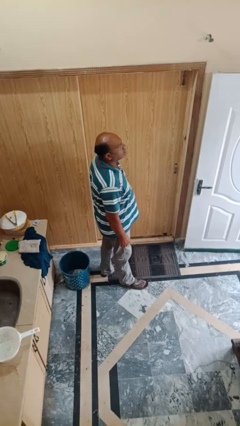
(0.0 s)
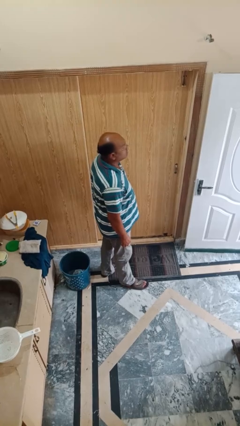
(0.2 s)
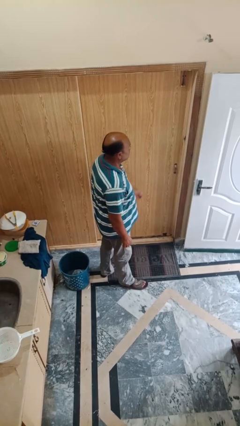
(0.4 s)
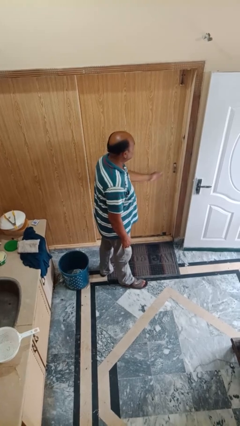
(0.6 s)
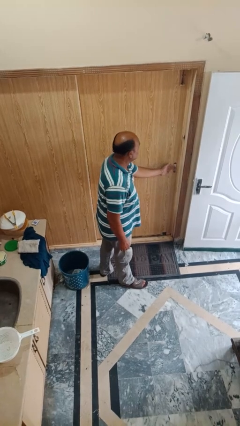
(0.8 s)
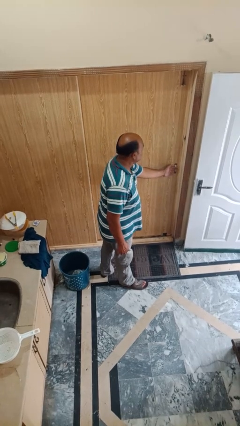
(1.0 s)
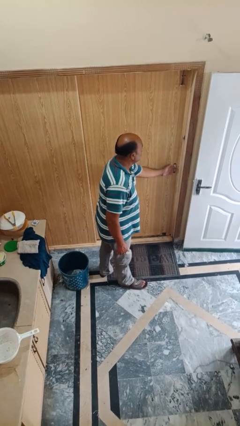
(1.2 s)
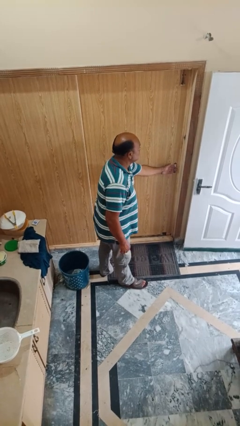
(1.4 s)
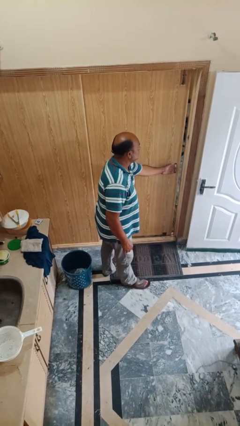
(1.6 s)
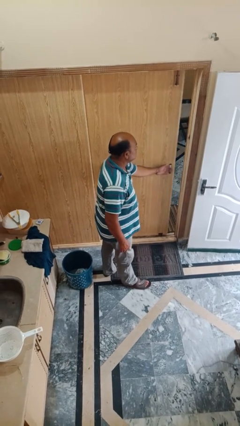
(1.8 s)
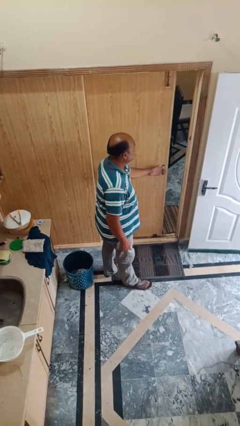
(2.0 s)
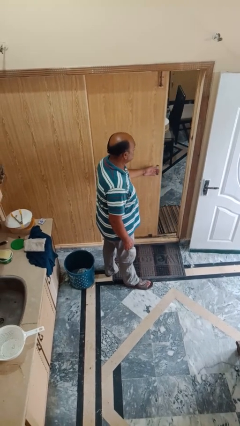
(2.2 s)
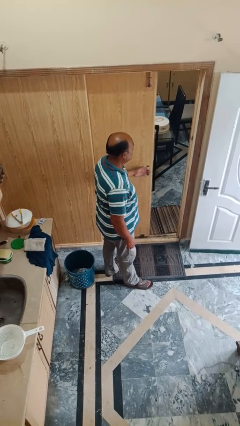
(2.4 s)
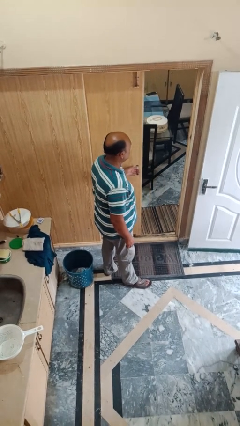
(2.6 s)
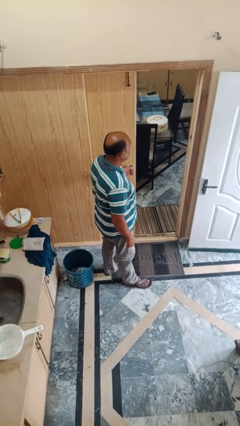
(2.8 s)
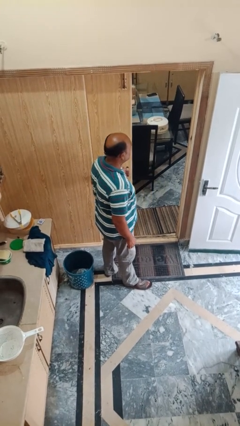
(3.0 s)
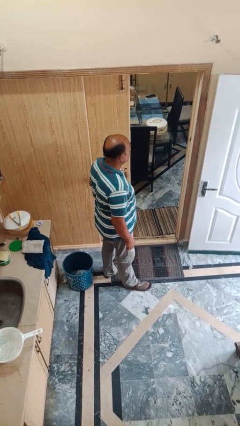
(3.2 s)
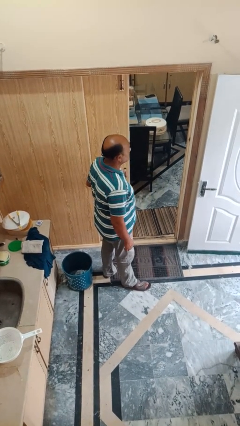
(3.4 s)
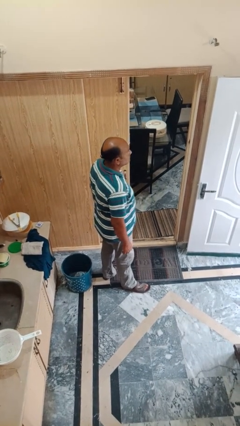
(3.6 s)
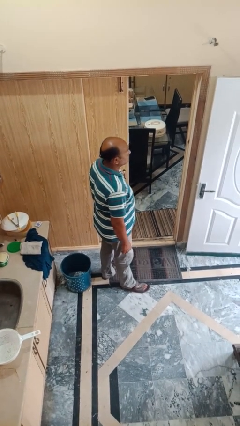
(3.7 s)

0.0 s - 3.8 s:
person opens sliding door

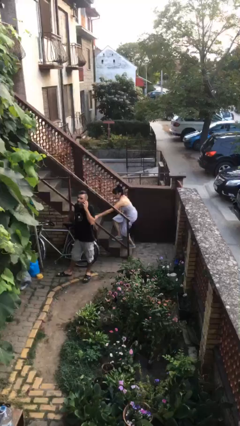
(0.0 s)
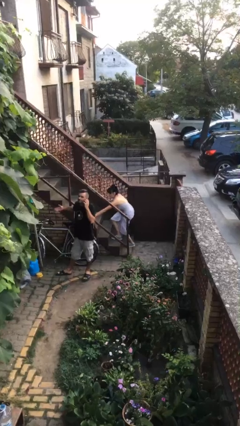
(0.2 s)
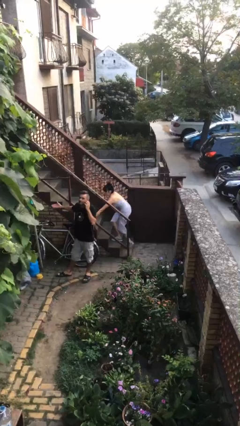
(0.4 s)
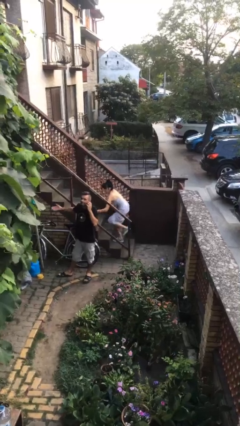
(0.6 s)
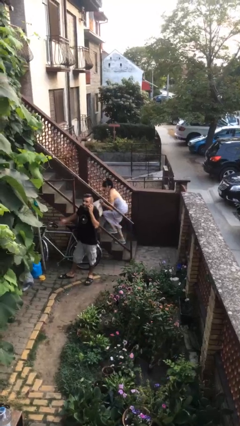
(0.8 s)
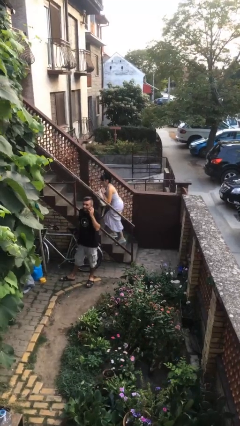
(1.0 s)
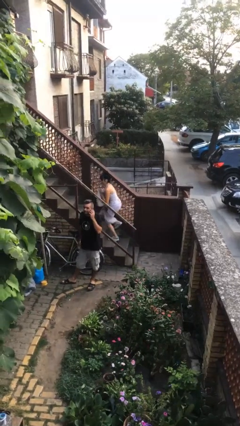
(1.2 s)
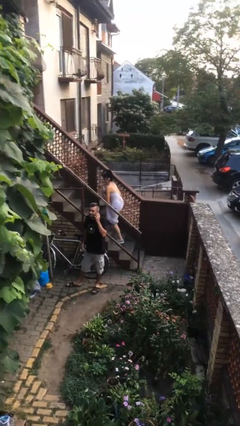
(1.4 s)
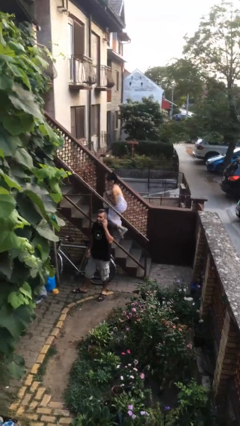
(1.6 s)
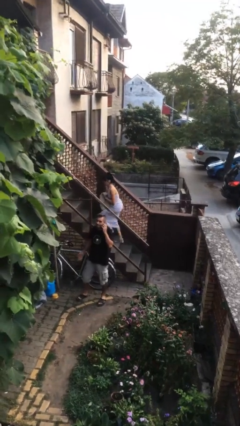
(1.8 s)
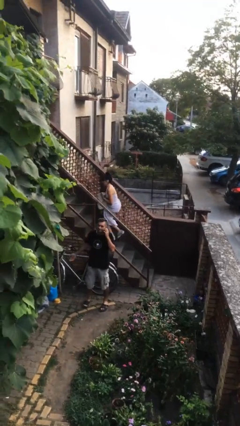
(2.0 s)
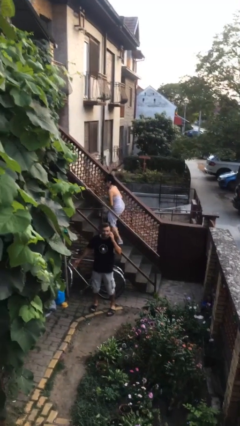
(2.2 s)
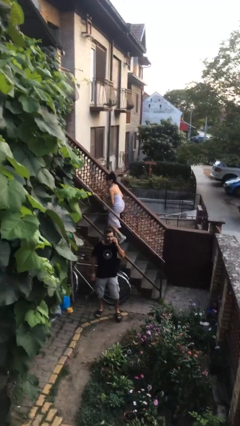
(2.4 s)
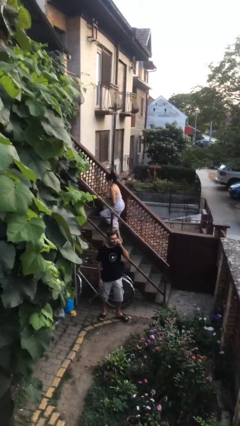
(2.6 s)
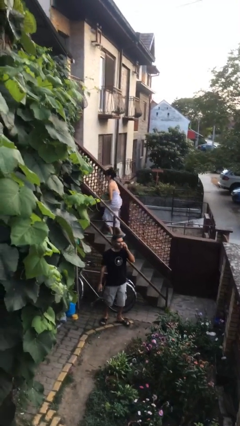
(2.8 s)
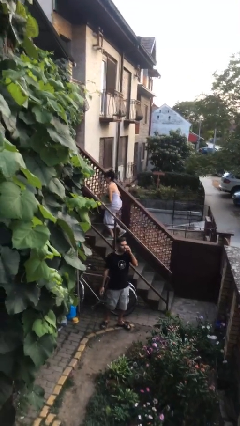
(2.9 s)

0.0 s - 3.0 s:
person steals object from person

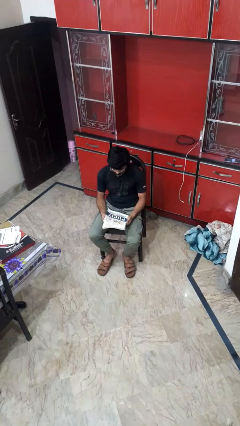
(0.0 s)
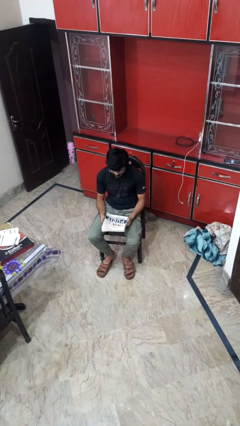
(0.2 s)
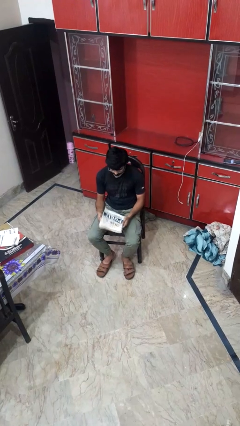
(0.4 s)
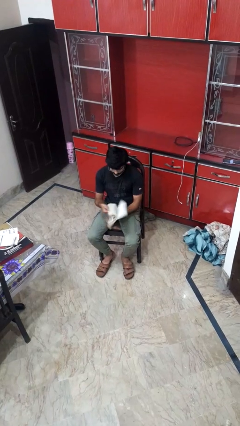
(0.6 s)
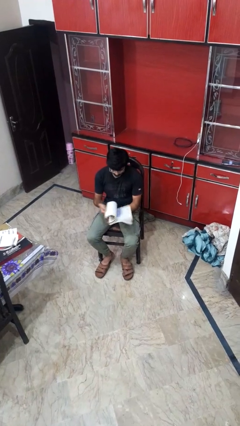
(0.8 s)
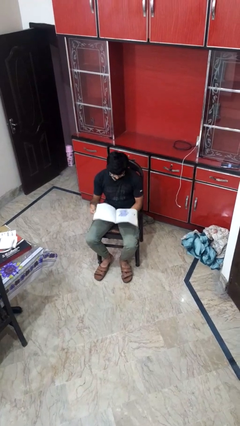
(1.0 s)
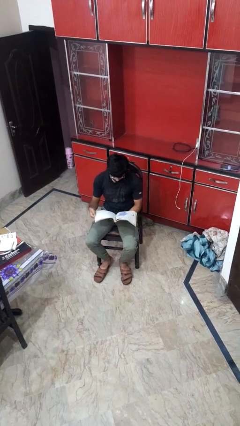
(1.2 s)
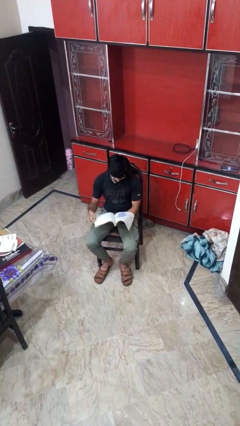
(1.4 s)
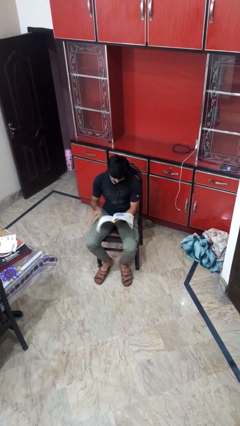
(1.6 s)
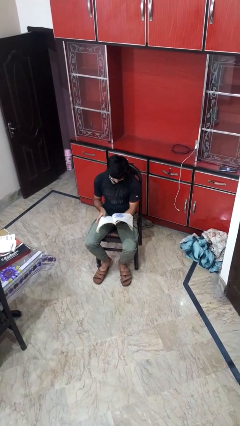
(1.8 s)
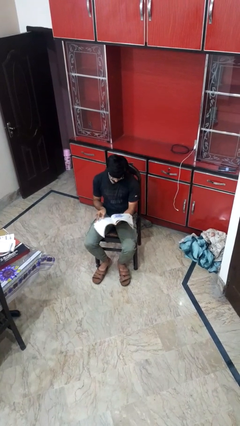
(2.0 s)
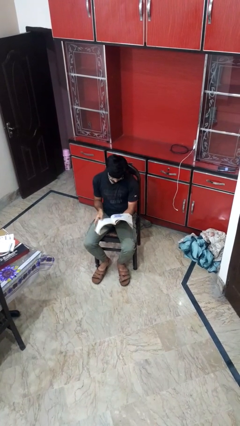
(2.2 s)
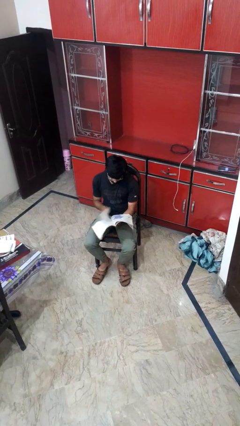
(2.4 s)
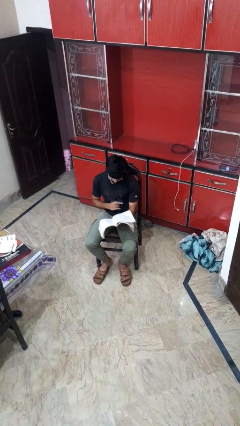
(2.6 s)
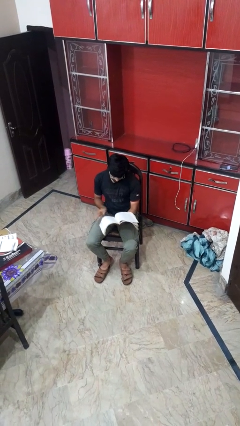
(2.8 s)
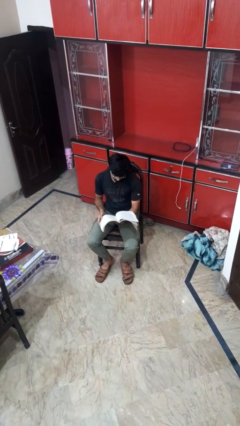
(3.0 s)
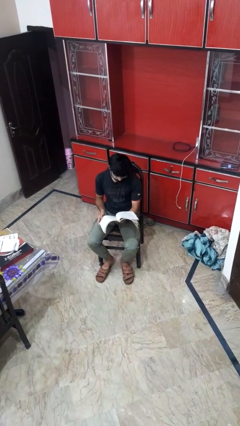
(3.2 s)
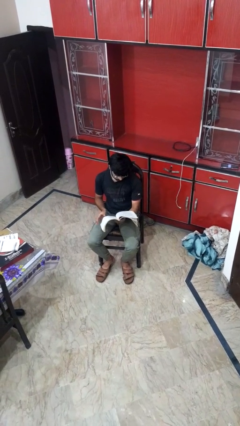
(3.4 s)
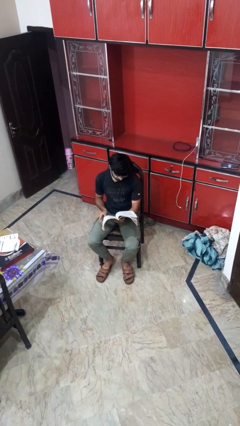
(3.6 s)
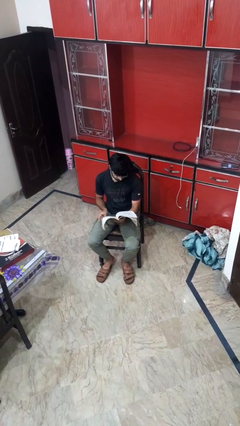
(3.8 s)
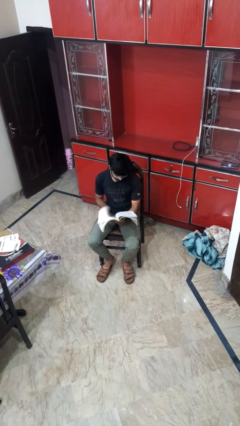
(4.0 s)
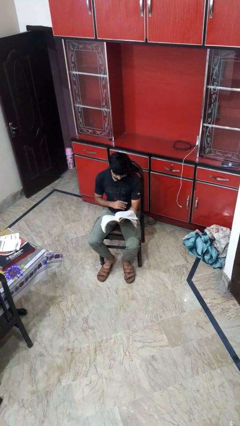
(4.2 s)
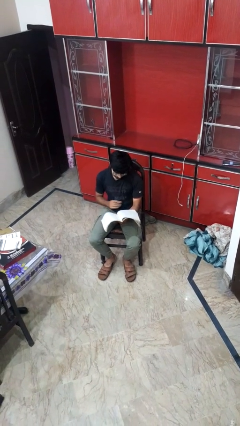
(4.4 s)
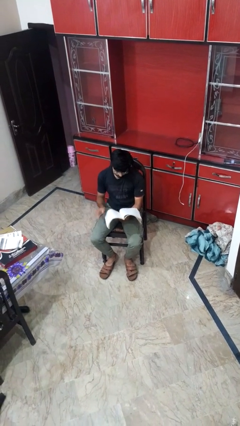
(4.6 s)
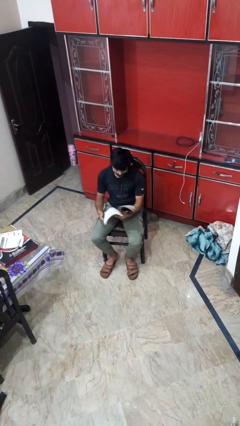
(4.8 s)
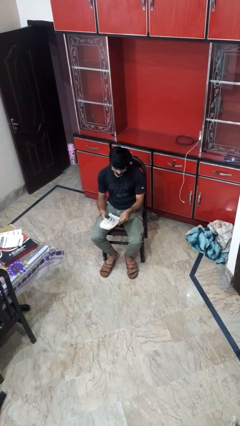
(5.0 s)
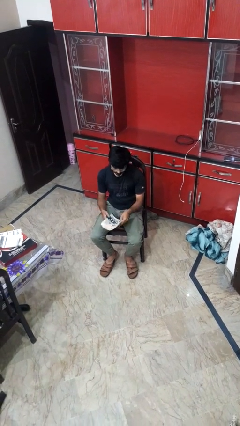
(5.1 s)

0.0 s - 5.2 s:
person reads magazine

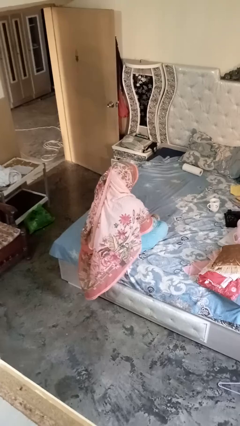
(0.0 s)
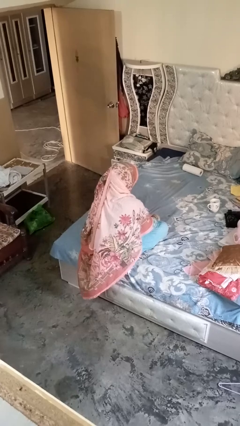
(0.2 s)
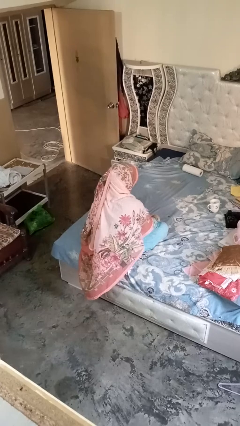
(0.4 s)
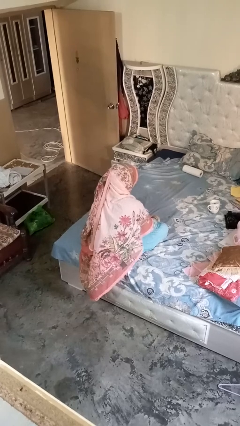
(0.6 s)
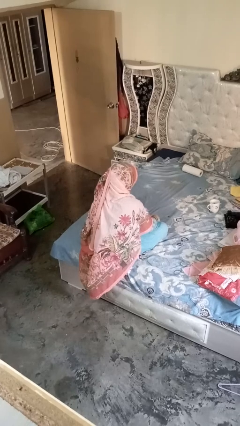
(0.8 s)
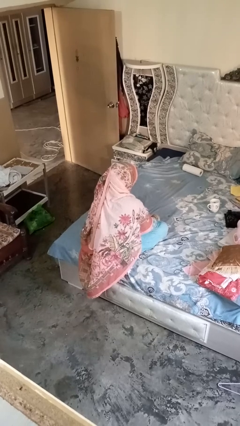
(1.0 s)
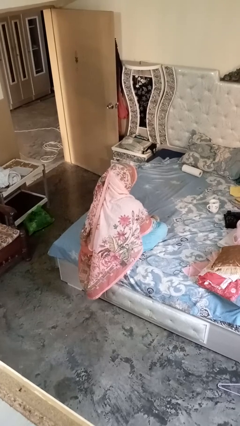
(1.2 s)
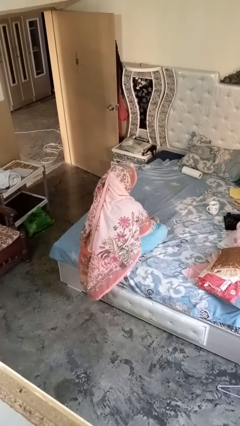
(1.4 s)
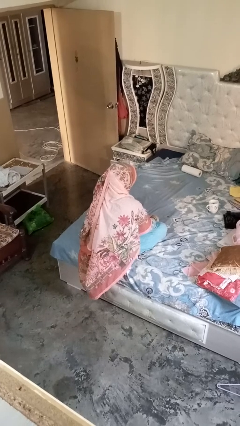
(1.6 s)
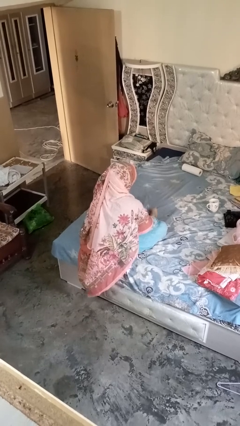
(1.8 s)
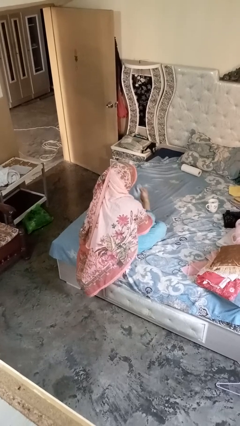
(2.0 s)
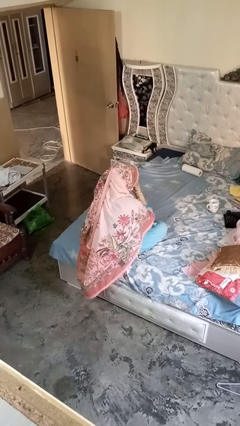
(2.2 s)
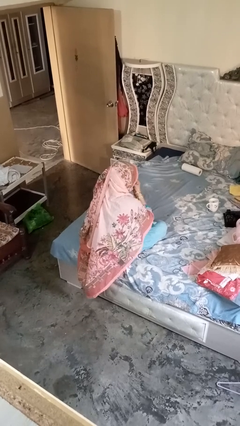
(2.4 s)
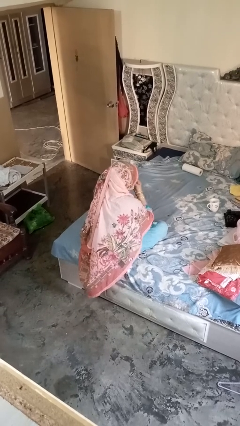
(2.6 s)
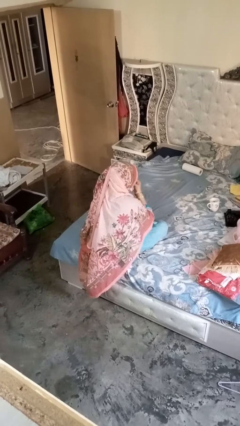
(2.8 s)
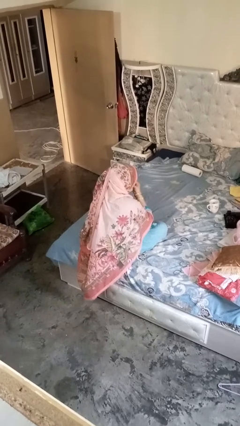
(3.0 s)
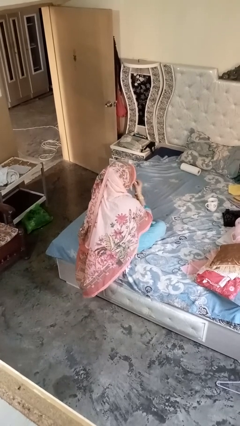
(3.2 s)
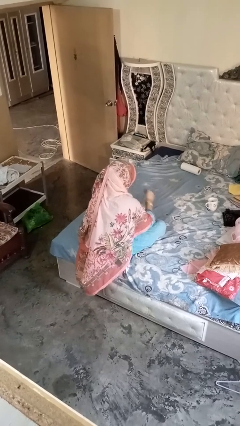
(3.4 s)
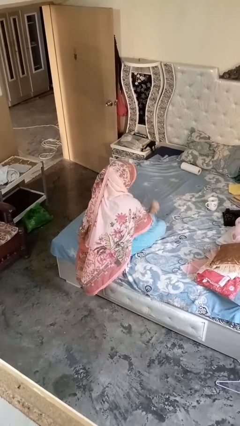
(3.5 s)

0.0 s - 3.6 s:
person blows nose

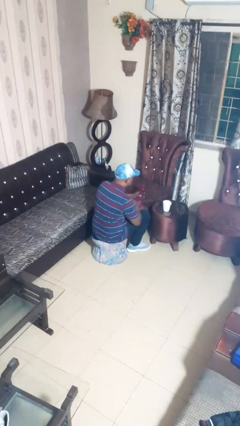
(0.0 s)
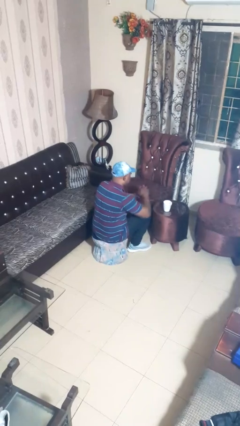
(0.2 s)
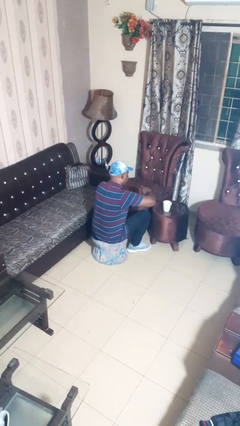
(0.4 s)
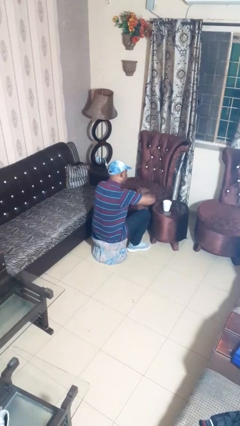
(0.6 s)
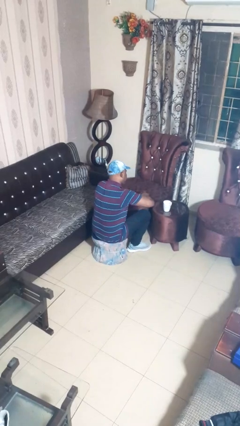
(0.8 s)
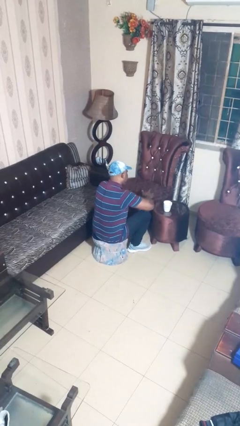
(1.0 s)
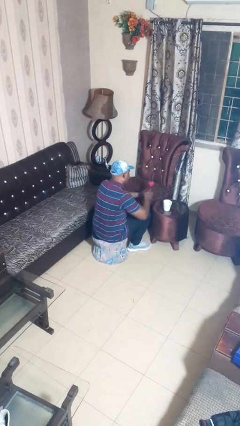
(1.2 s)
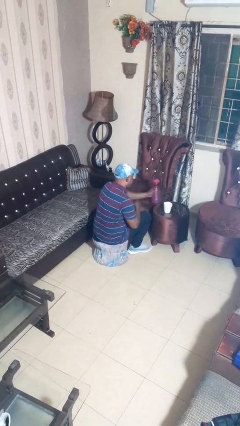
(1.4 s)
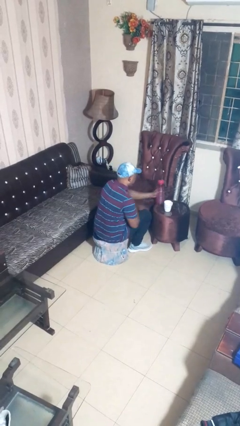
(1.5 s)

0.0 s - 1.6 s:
person screws lid to bottle

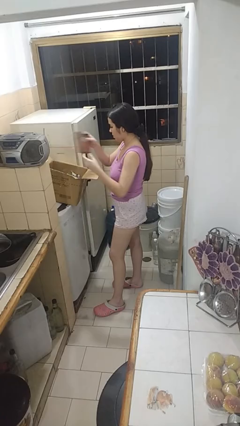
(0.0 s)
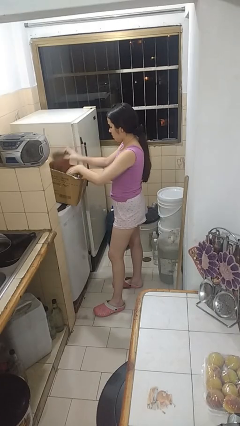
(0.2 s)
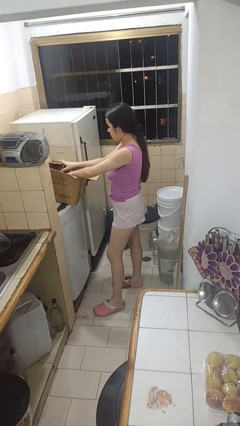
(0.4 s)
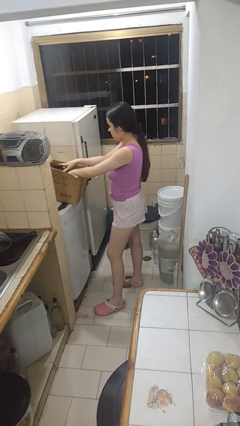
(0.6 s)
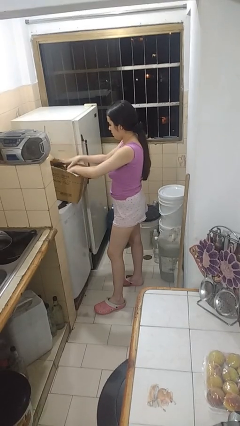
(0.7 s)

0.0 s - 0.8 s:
person puts object into box
